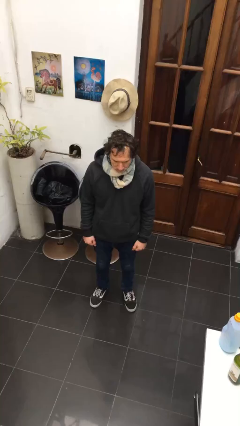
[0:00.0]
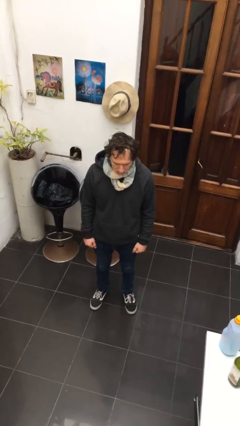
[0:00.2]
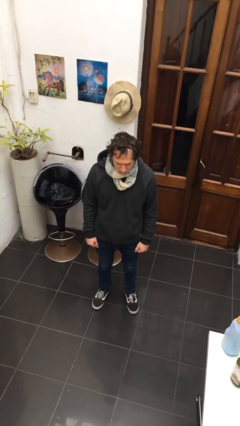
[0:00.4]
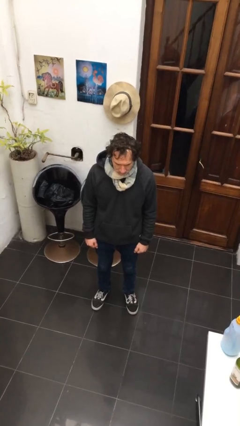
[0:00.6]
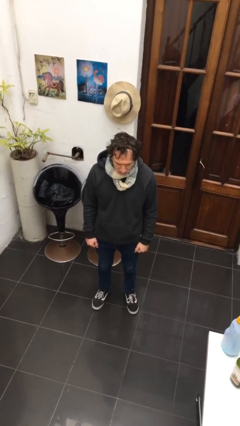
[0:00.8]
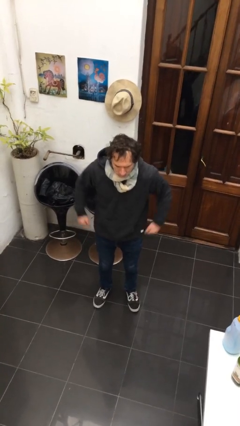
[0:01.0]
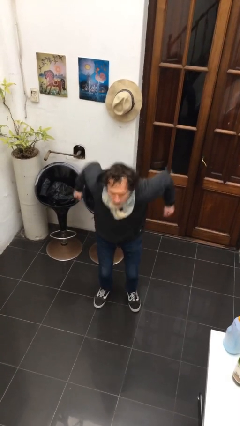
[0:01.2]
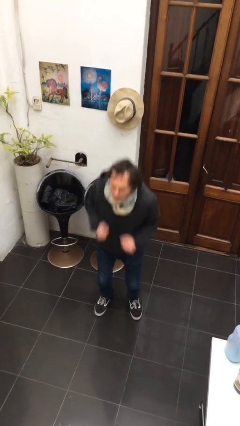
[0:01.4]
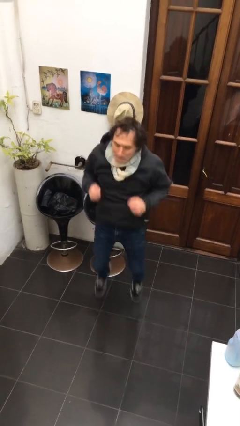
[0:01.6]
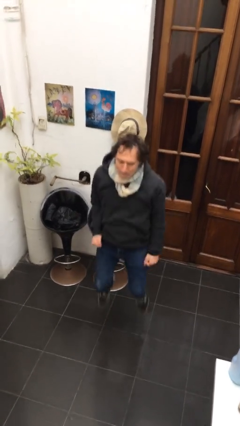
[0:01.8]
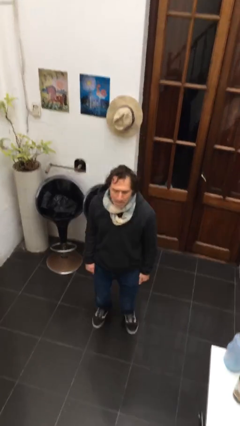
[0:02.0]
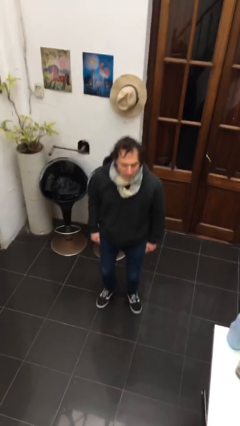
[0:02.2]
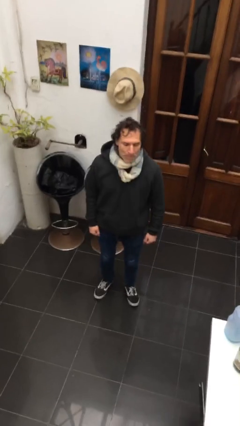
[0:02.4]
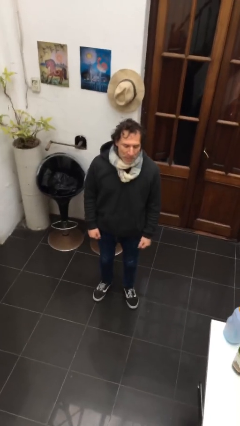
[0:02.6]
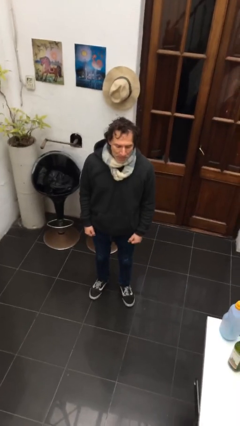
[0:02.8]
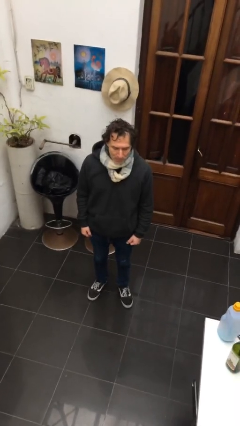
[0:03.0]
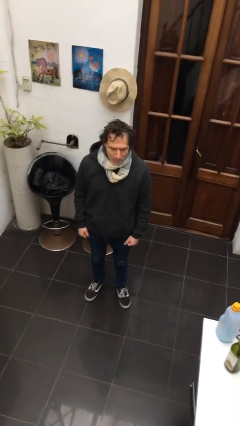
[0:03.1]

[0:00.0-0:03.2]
person jumps

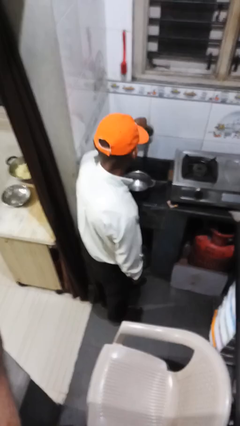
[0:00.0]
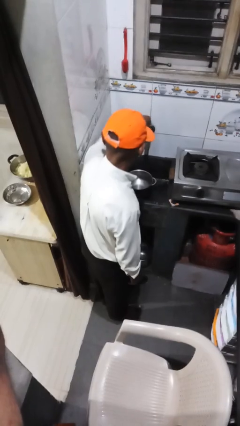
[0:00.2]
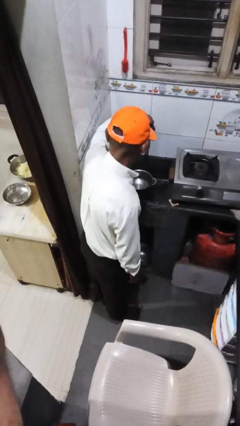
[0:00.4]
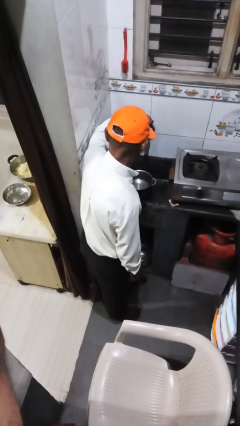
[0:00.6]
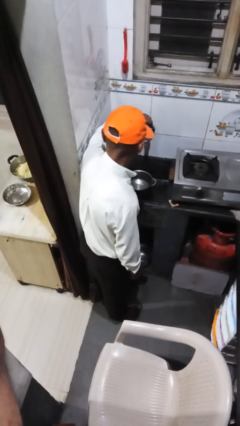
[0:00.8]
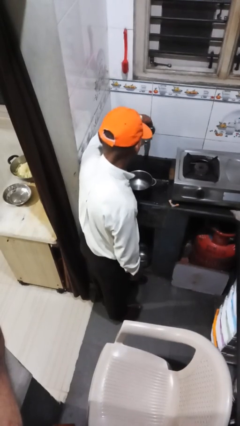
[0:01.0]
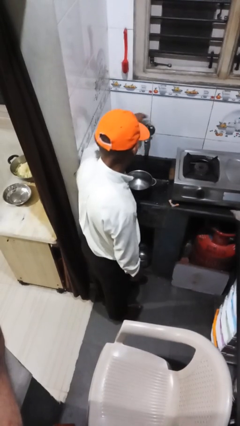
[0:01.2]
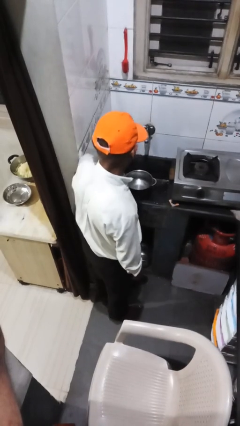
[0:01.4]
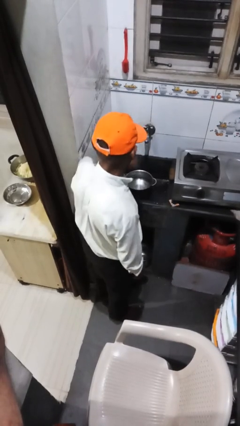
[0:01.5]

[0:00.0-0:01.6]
person turns off faucet

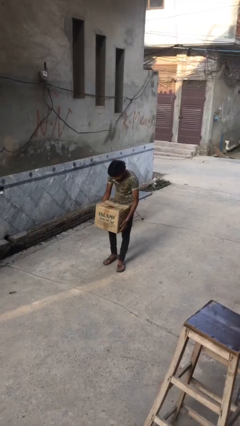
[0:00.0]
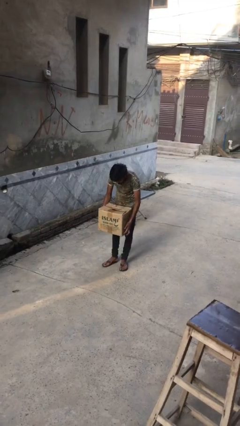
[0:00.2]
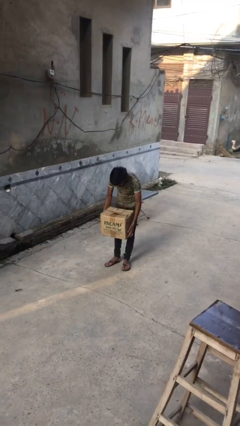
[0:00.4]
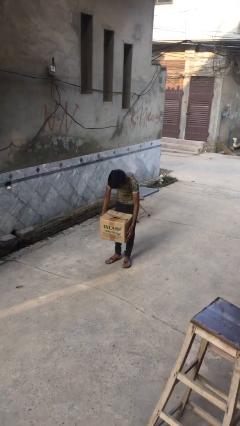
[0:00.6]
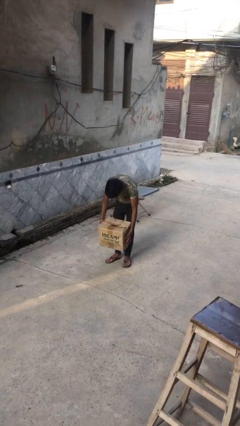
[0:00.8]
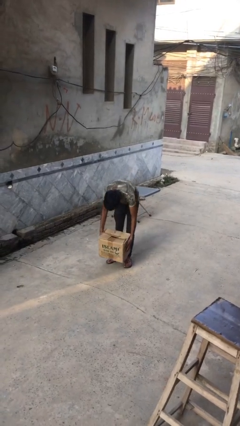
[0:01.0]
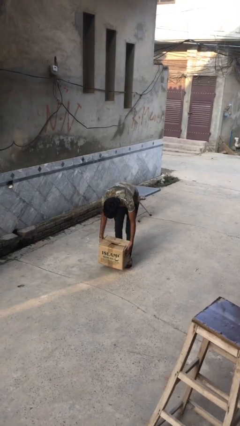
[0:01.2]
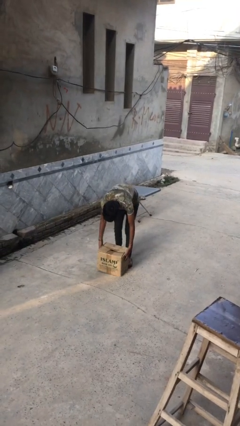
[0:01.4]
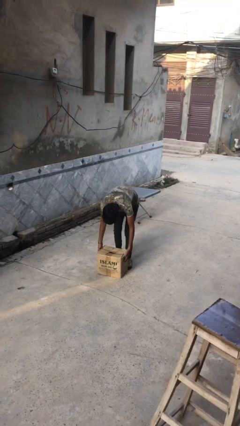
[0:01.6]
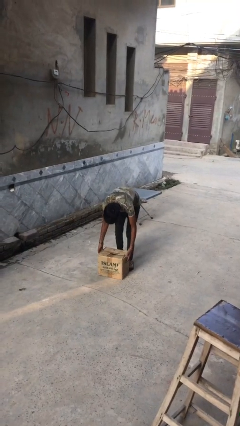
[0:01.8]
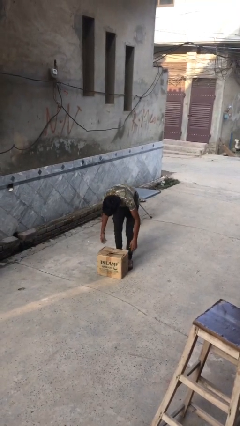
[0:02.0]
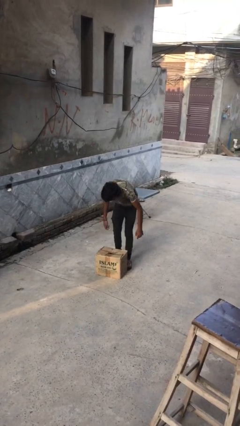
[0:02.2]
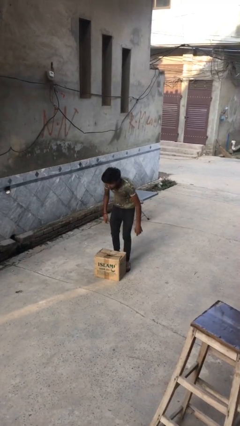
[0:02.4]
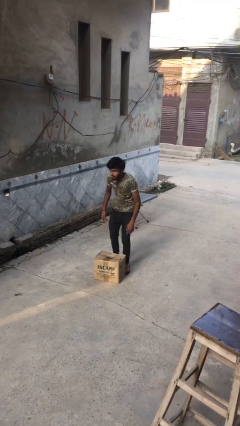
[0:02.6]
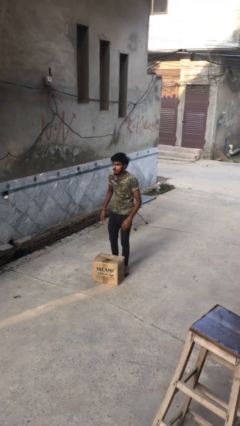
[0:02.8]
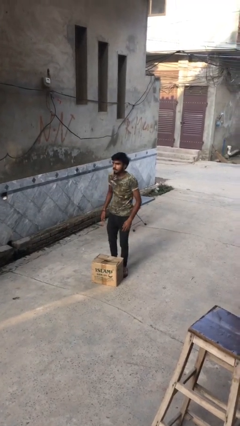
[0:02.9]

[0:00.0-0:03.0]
person puts down object on floor

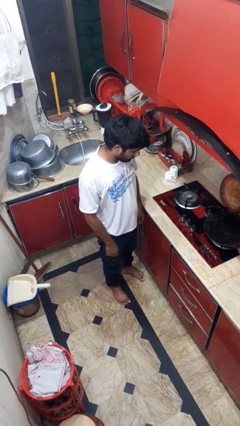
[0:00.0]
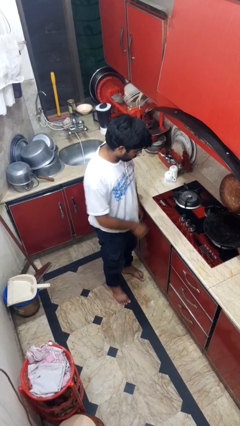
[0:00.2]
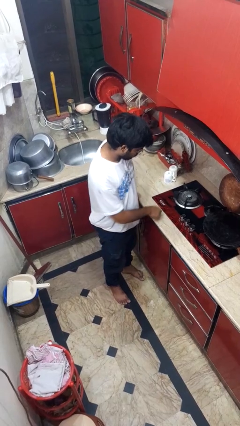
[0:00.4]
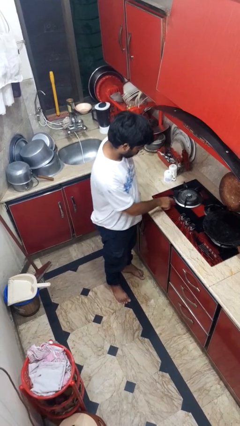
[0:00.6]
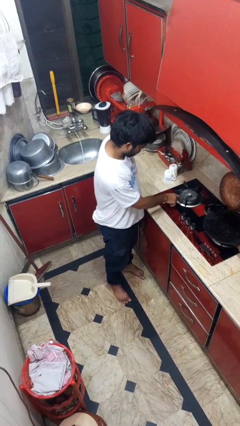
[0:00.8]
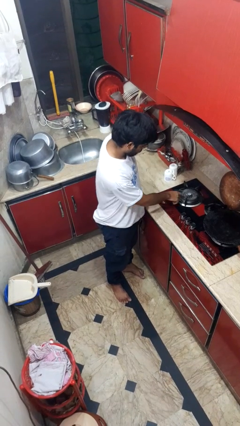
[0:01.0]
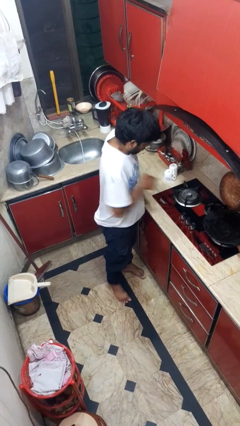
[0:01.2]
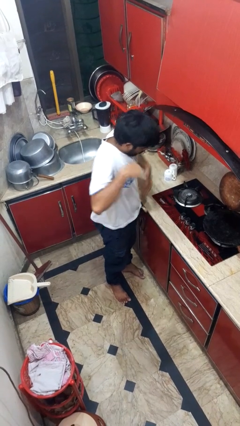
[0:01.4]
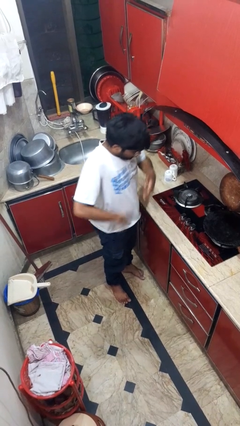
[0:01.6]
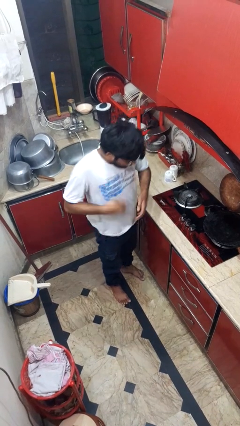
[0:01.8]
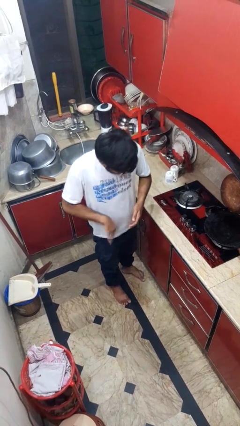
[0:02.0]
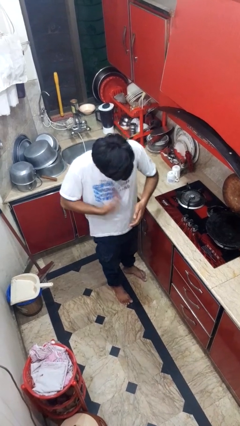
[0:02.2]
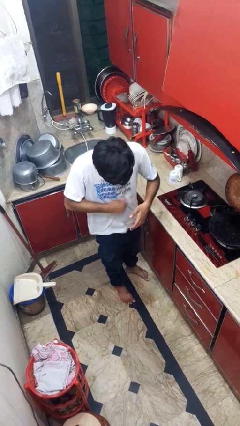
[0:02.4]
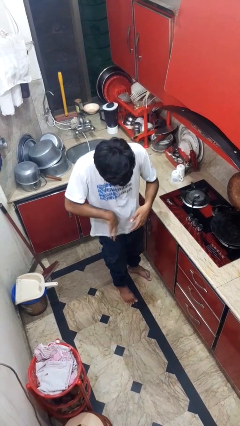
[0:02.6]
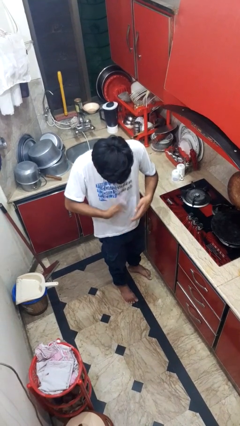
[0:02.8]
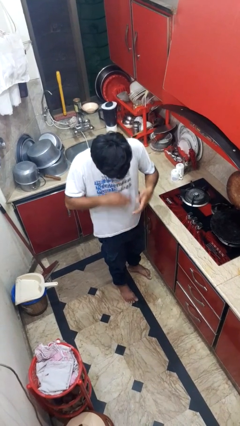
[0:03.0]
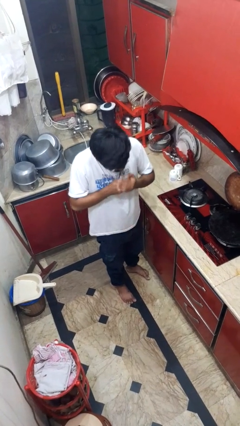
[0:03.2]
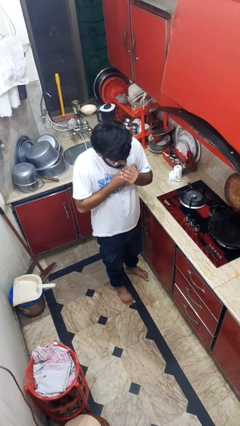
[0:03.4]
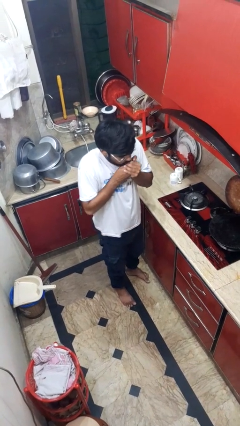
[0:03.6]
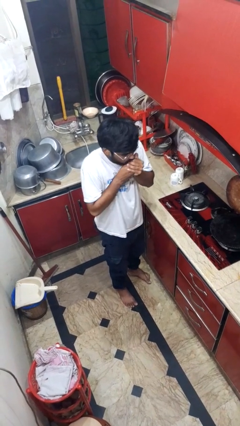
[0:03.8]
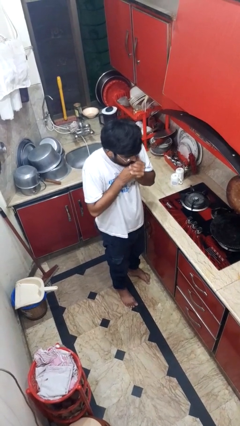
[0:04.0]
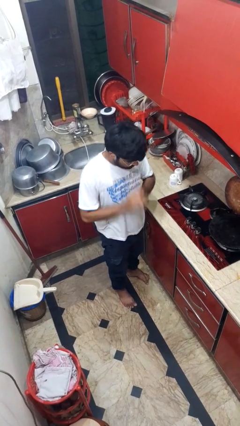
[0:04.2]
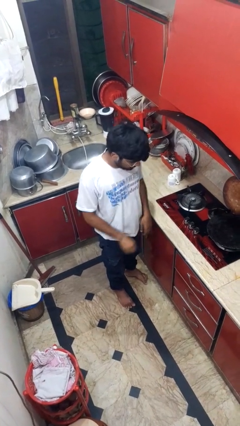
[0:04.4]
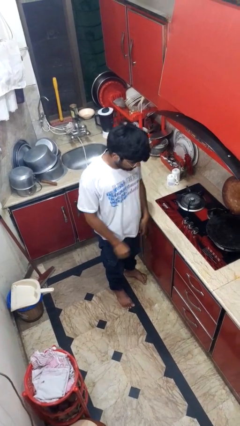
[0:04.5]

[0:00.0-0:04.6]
person burns hand

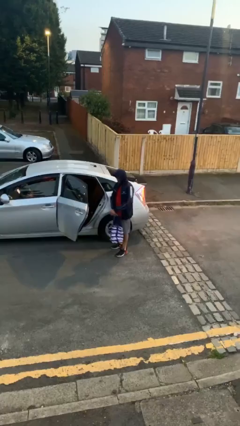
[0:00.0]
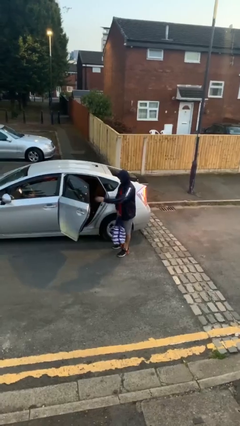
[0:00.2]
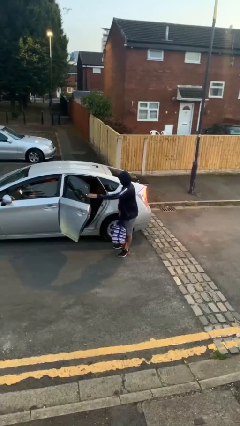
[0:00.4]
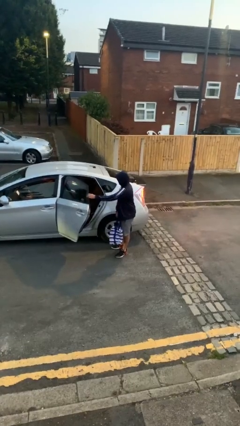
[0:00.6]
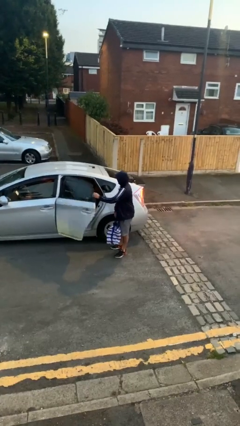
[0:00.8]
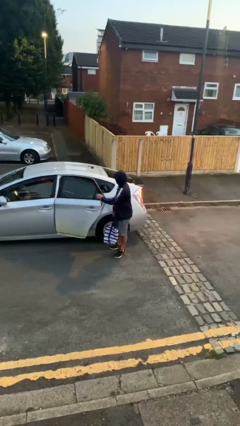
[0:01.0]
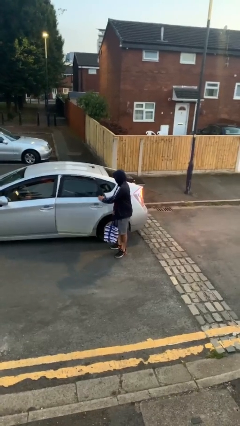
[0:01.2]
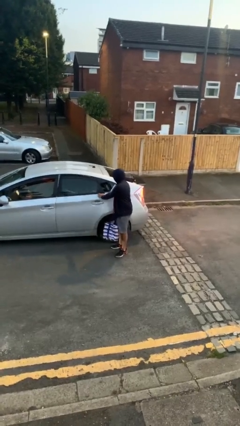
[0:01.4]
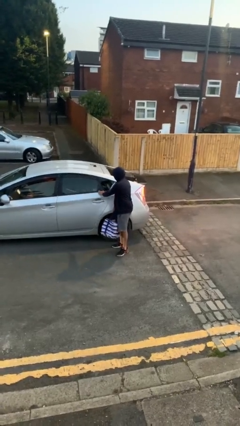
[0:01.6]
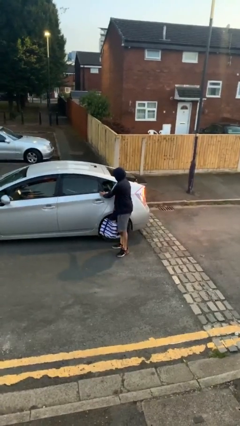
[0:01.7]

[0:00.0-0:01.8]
person closes car door

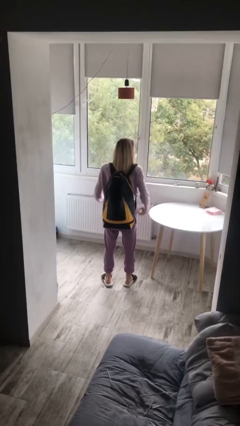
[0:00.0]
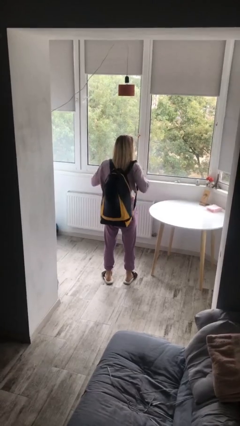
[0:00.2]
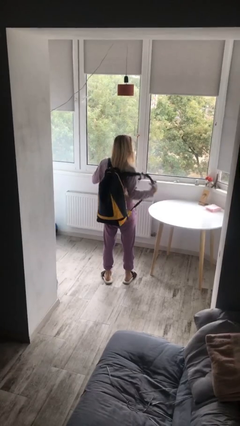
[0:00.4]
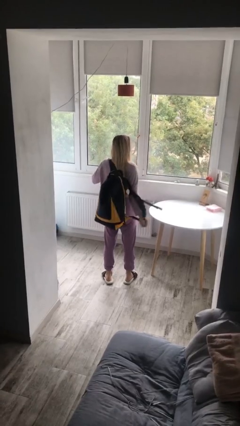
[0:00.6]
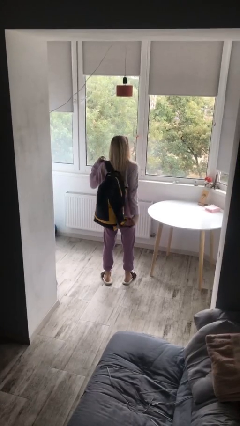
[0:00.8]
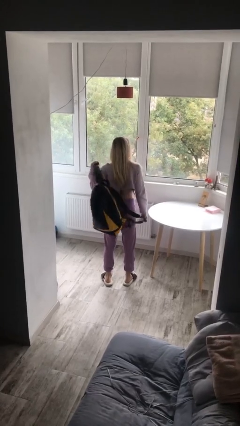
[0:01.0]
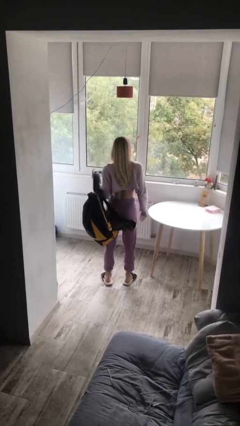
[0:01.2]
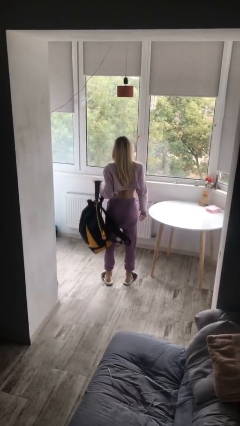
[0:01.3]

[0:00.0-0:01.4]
person takes off backpack

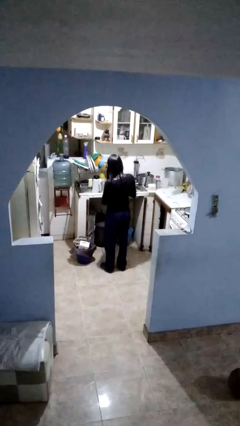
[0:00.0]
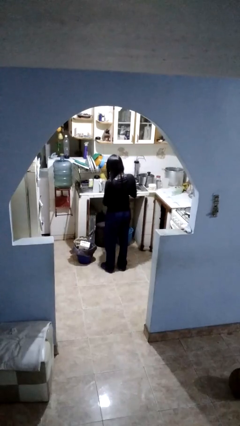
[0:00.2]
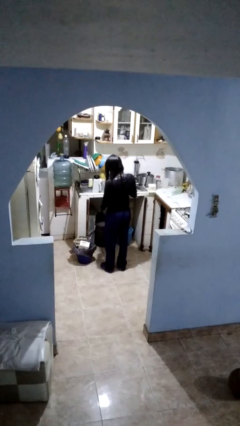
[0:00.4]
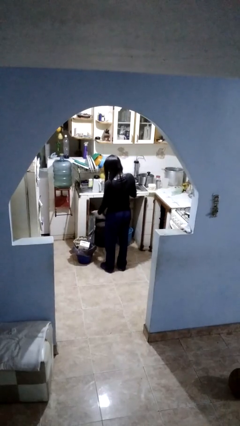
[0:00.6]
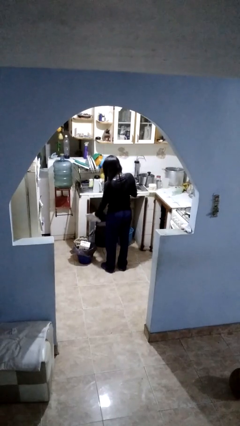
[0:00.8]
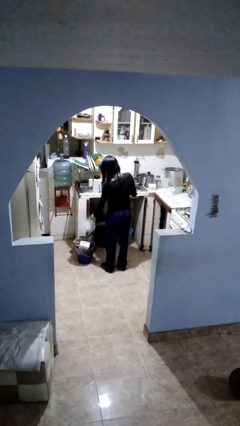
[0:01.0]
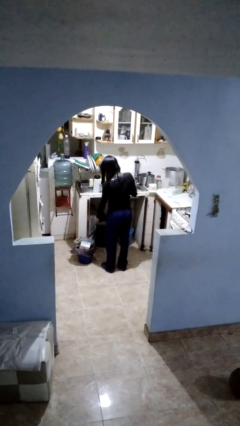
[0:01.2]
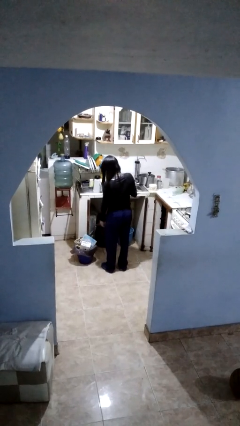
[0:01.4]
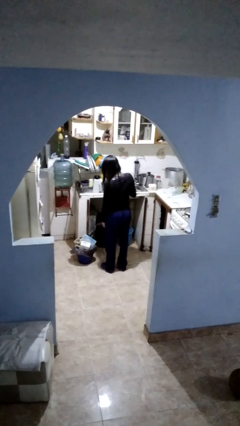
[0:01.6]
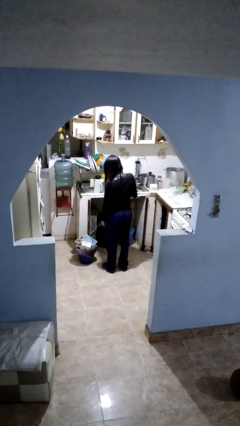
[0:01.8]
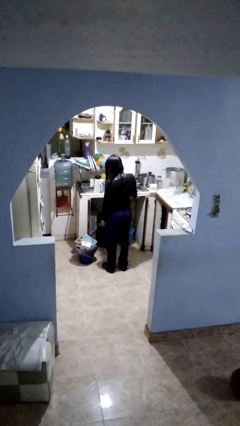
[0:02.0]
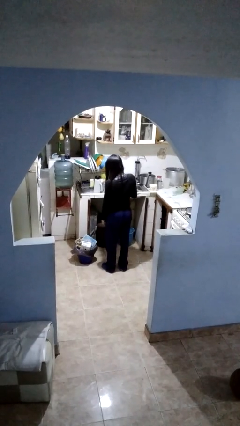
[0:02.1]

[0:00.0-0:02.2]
person discards trash
